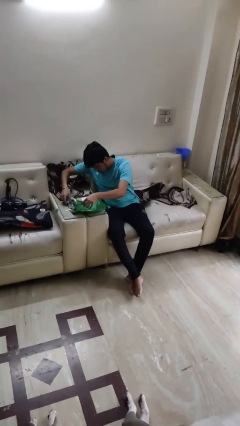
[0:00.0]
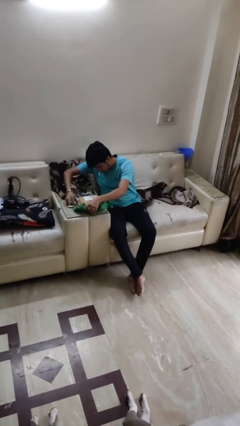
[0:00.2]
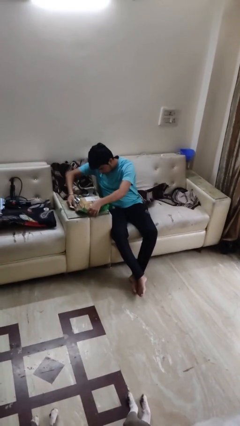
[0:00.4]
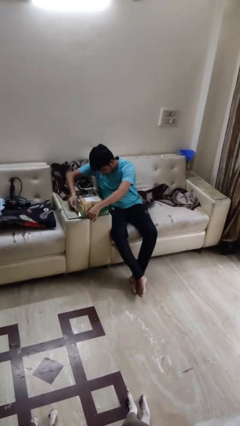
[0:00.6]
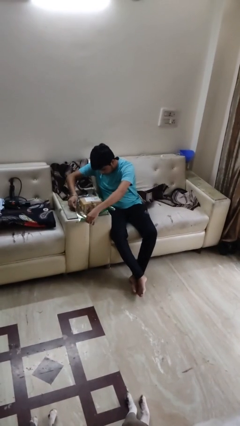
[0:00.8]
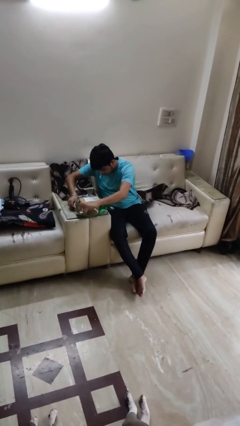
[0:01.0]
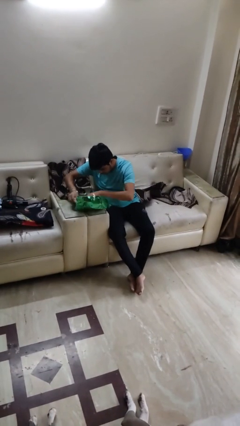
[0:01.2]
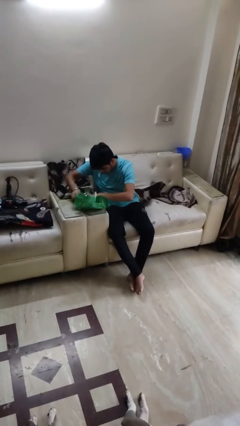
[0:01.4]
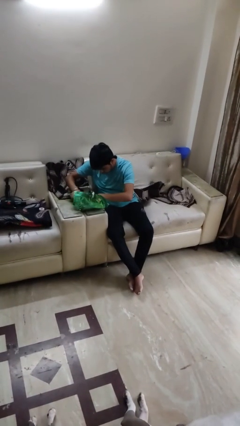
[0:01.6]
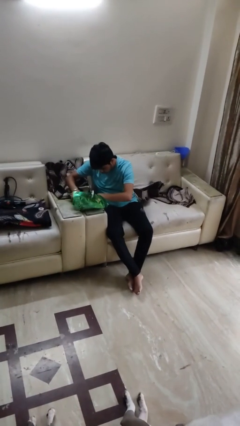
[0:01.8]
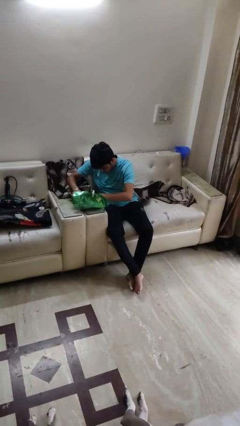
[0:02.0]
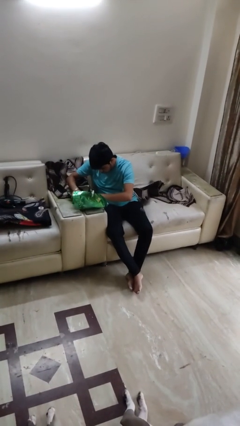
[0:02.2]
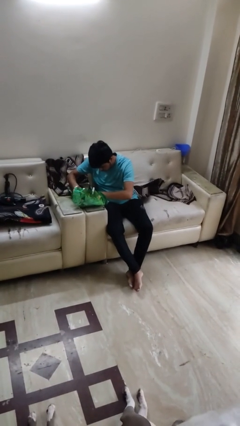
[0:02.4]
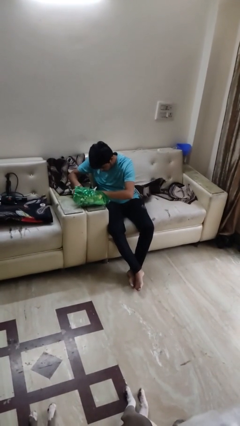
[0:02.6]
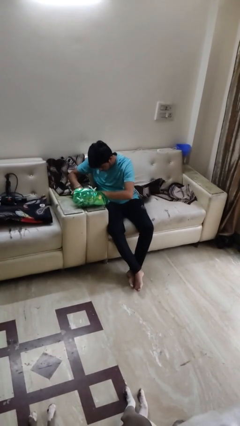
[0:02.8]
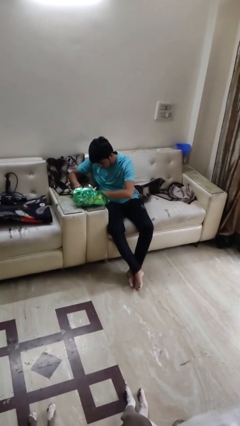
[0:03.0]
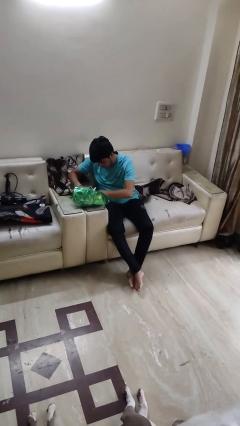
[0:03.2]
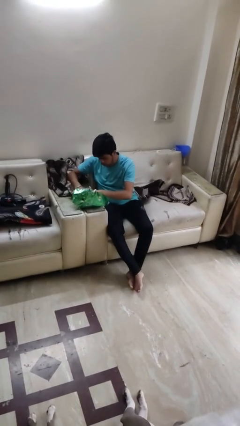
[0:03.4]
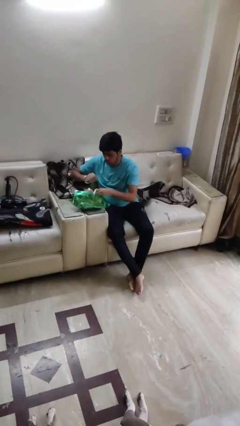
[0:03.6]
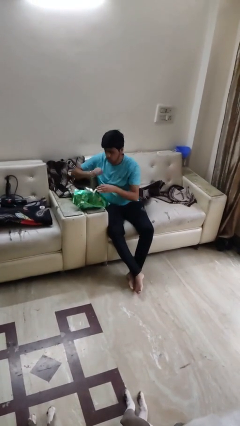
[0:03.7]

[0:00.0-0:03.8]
person wraps box

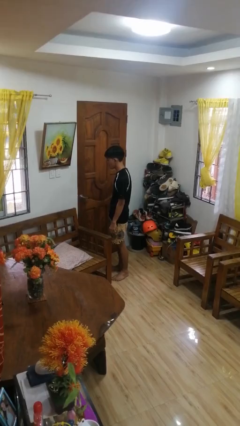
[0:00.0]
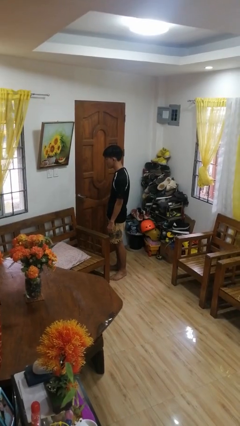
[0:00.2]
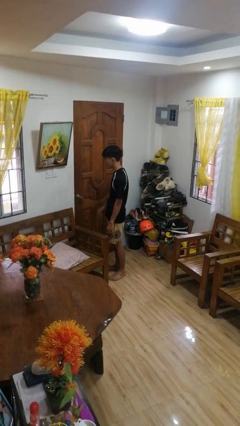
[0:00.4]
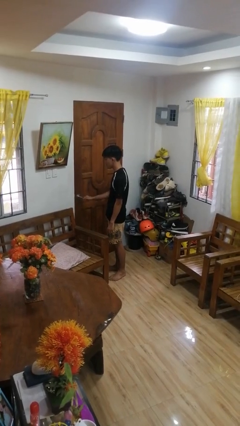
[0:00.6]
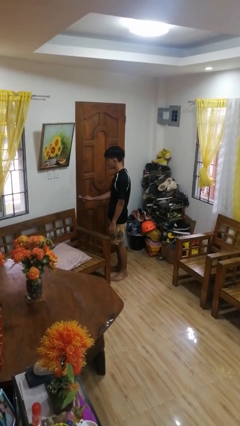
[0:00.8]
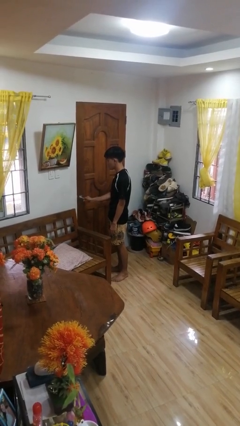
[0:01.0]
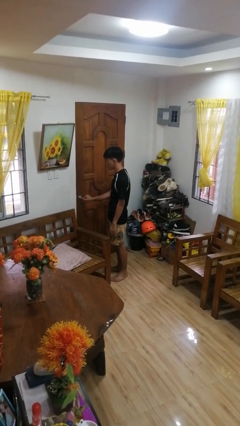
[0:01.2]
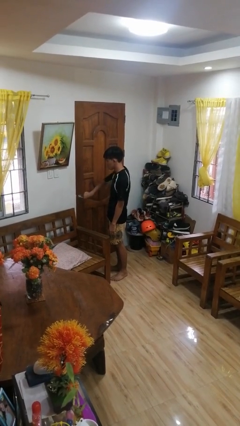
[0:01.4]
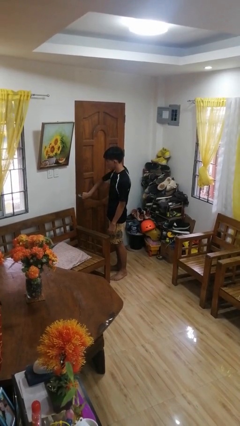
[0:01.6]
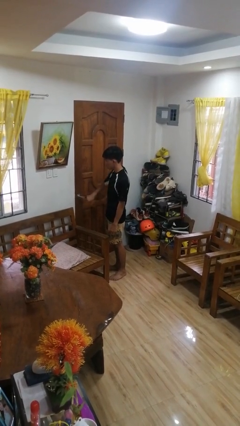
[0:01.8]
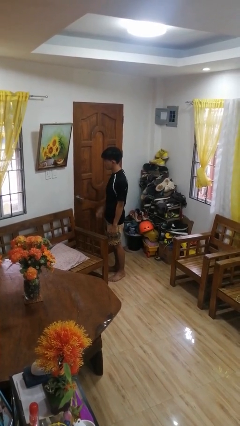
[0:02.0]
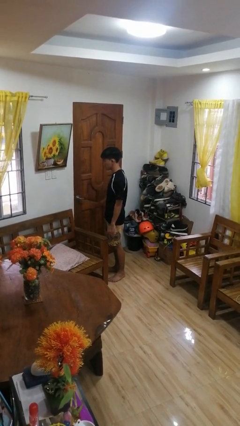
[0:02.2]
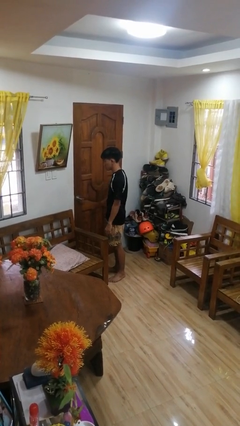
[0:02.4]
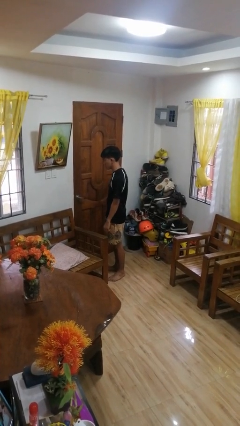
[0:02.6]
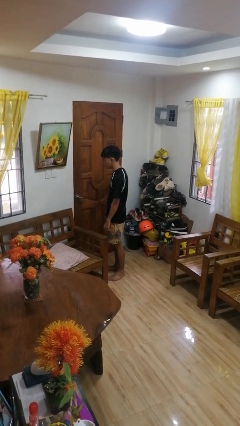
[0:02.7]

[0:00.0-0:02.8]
person locks door with keys

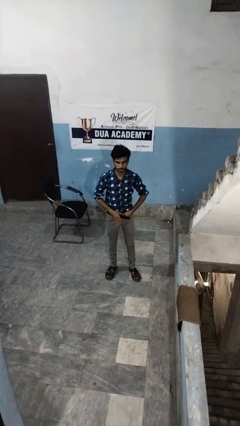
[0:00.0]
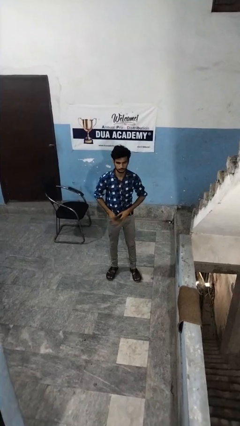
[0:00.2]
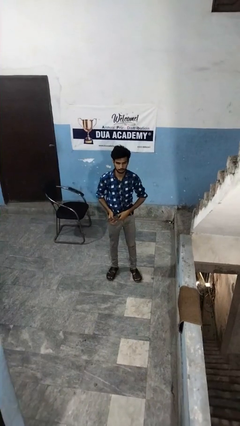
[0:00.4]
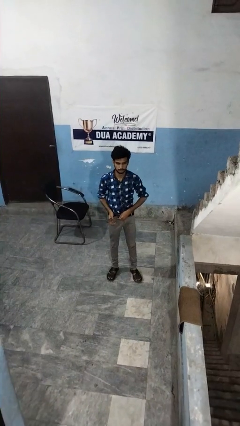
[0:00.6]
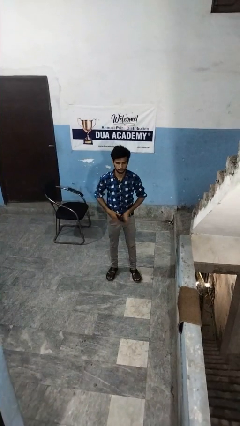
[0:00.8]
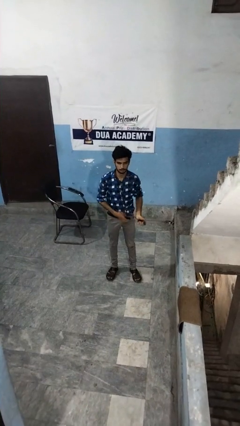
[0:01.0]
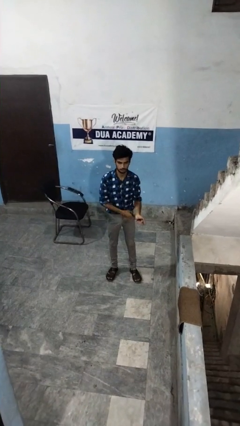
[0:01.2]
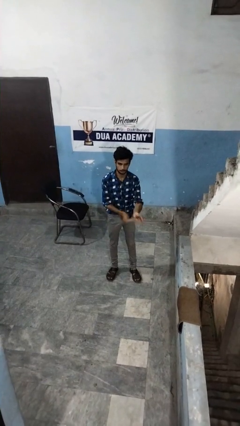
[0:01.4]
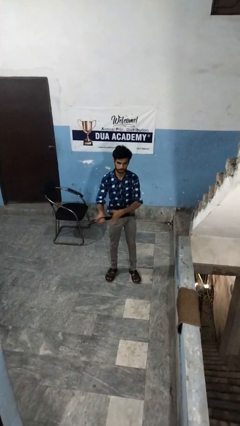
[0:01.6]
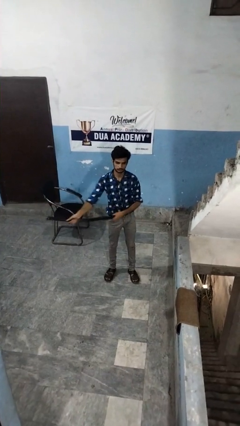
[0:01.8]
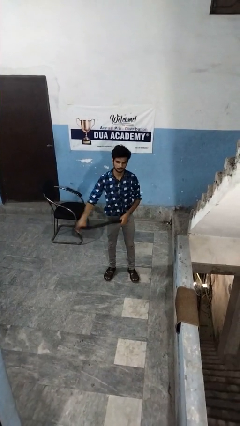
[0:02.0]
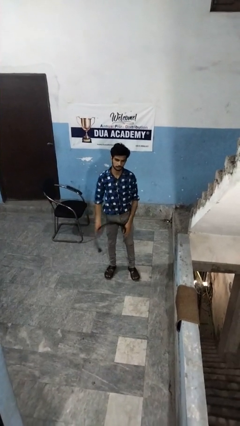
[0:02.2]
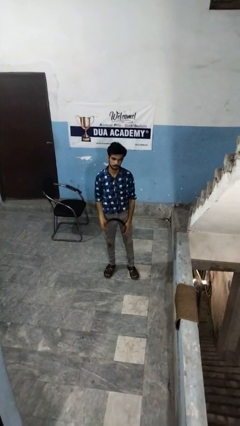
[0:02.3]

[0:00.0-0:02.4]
person takes off belt

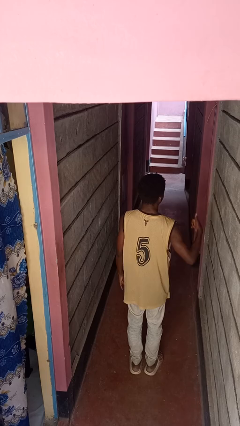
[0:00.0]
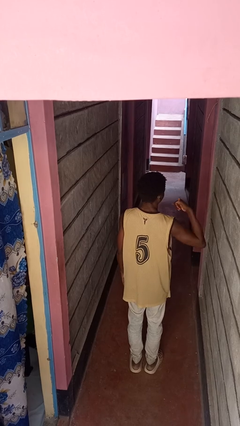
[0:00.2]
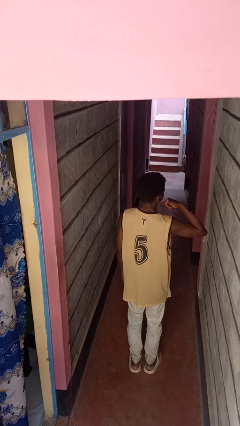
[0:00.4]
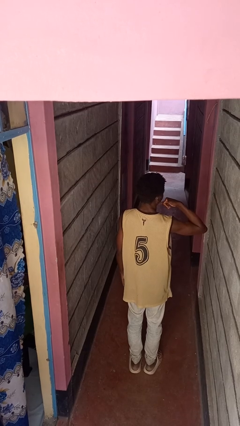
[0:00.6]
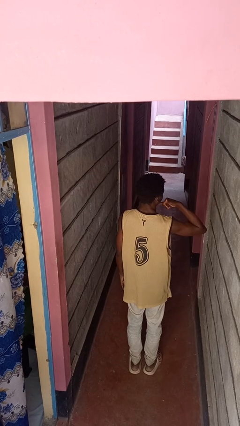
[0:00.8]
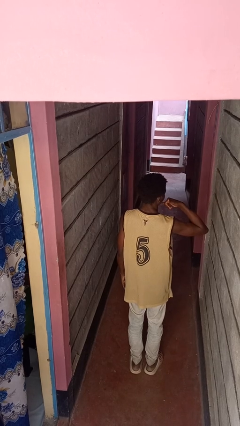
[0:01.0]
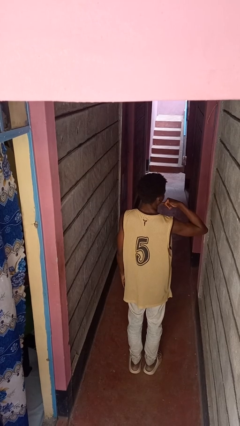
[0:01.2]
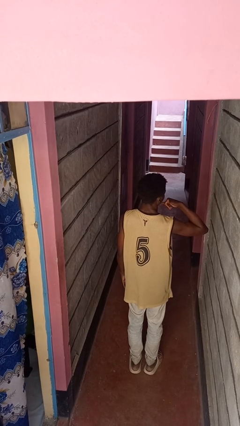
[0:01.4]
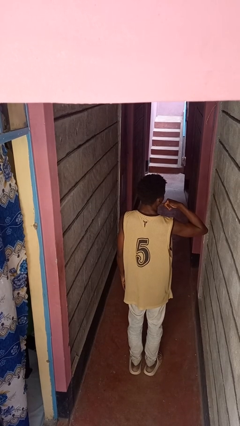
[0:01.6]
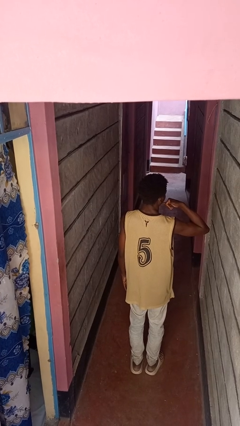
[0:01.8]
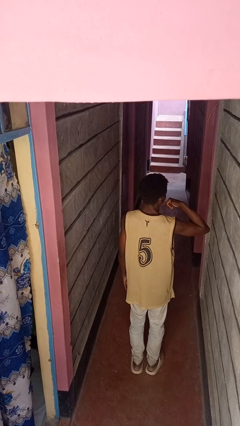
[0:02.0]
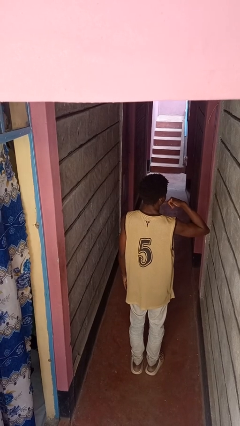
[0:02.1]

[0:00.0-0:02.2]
person gestures call me

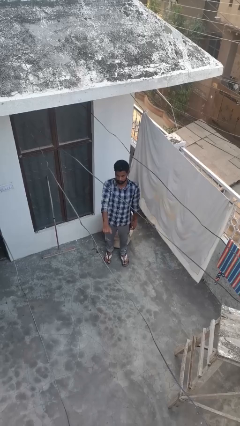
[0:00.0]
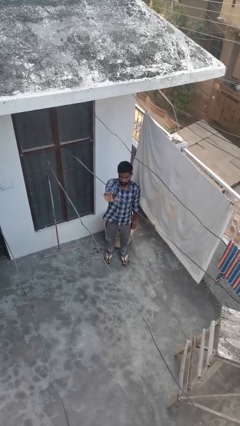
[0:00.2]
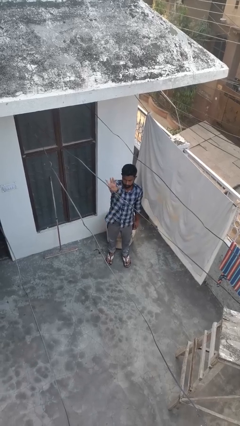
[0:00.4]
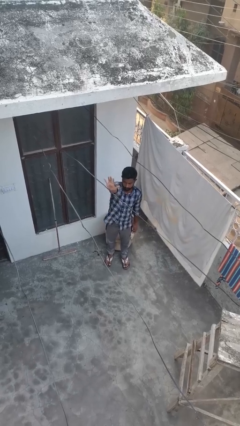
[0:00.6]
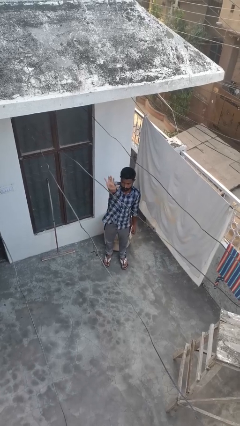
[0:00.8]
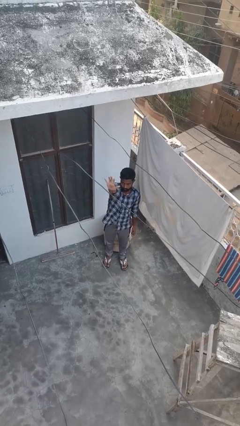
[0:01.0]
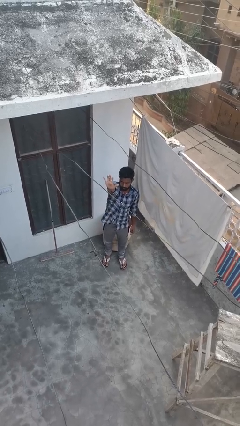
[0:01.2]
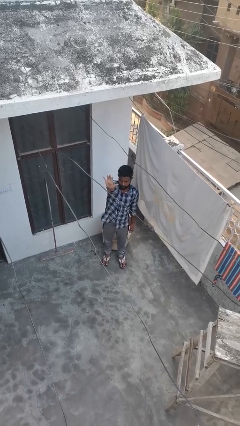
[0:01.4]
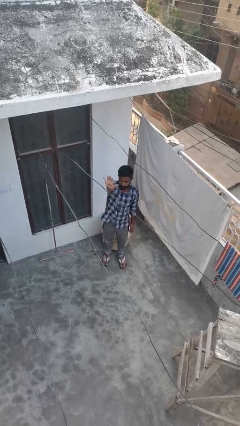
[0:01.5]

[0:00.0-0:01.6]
person gestures number five

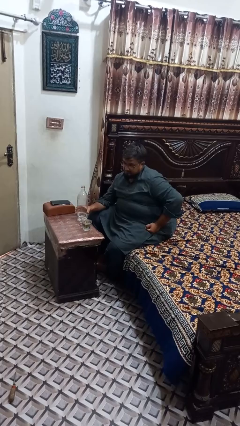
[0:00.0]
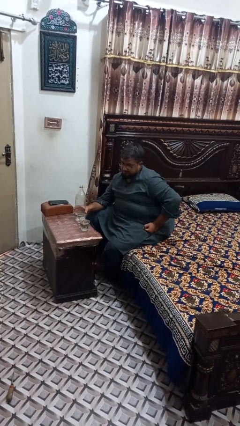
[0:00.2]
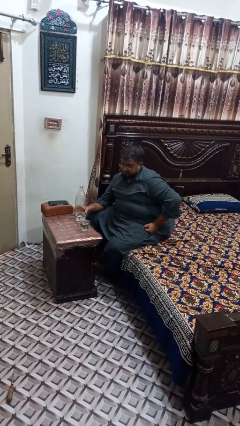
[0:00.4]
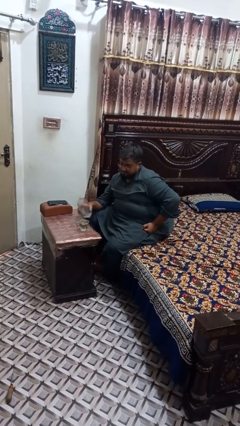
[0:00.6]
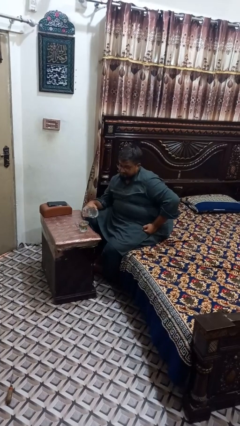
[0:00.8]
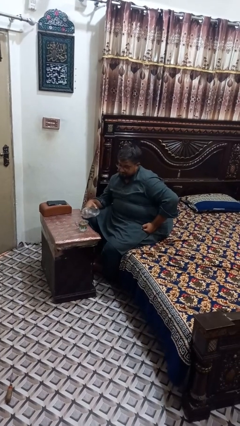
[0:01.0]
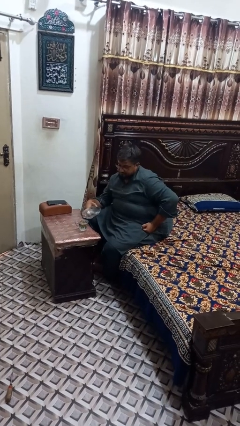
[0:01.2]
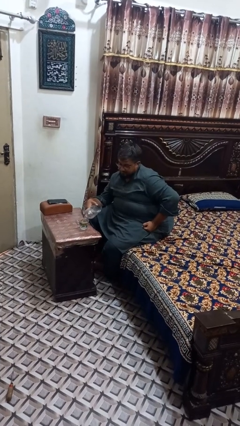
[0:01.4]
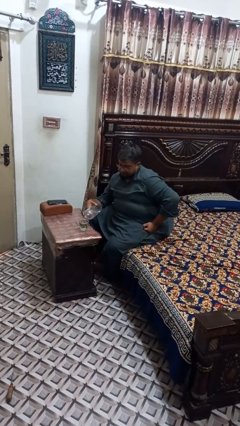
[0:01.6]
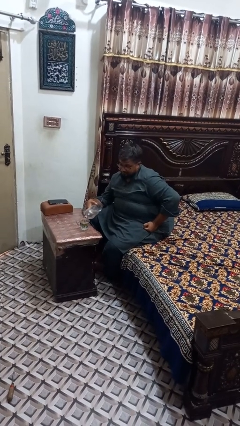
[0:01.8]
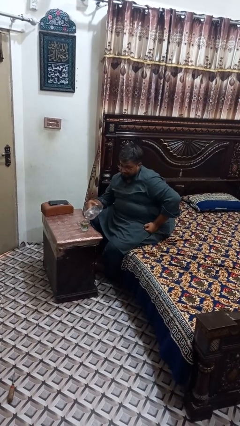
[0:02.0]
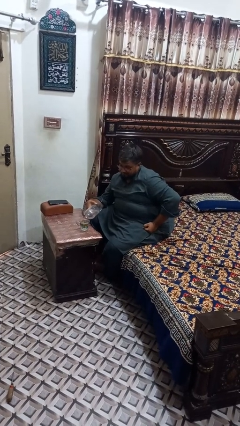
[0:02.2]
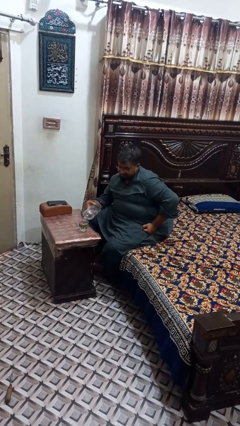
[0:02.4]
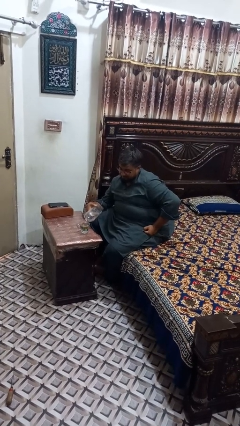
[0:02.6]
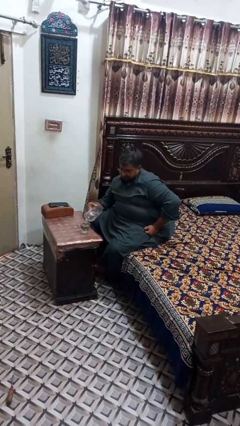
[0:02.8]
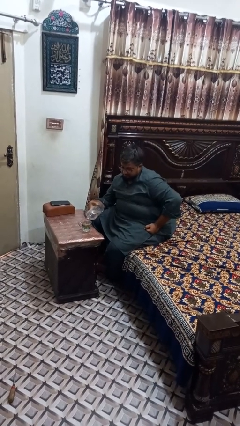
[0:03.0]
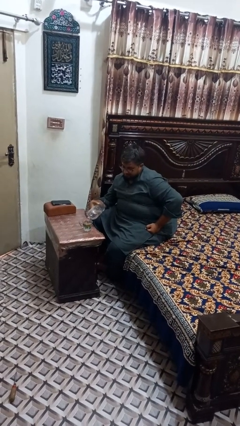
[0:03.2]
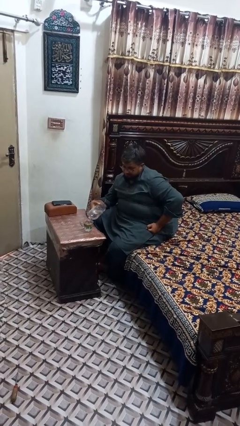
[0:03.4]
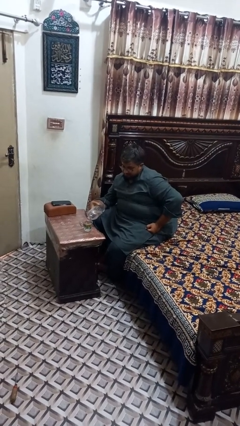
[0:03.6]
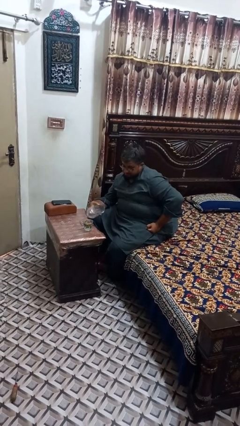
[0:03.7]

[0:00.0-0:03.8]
person pours liquid into cup

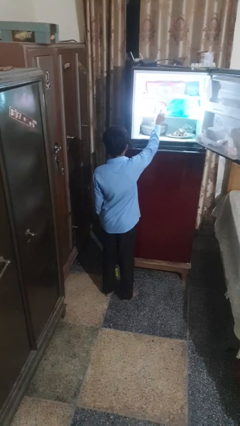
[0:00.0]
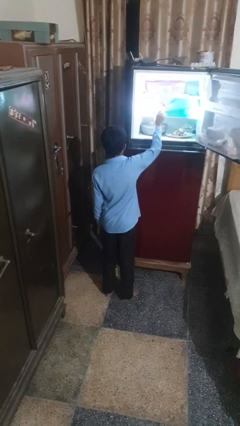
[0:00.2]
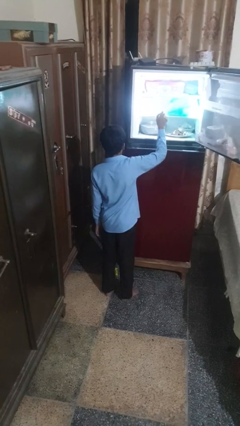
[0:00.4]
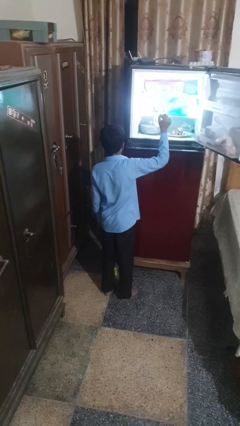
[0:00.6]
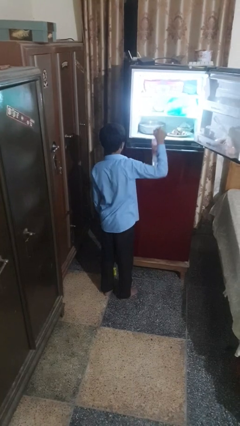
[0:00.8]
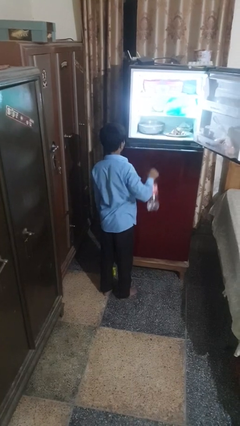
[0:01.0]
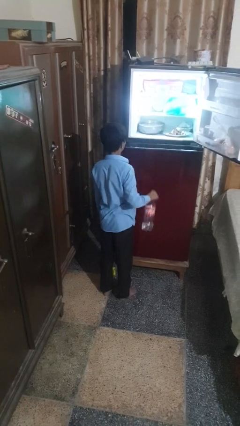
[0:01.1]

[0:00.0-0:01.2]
person takes object from refrigerator
